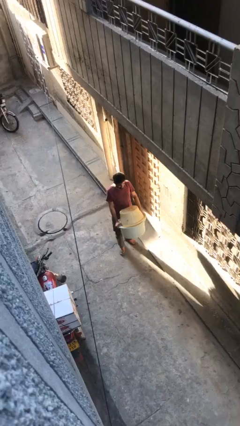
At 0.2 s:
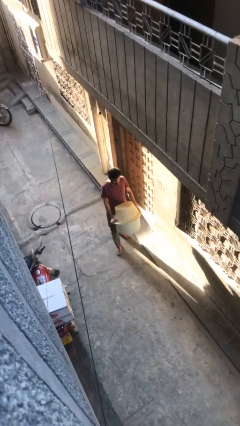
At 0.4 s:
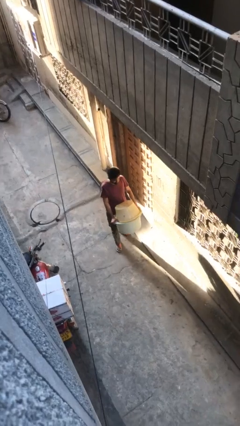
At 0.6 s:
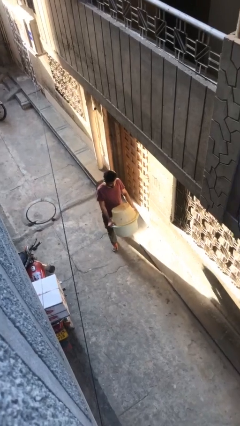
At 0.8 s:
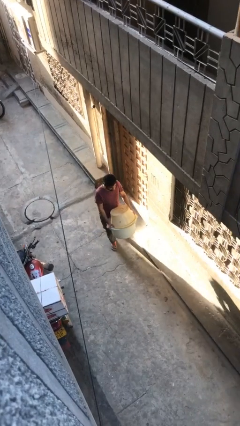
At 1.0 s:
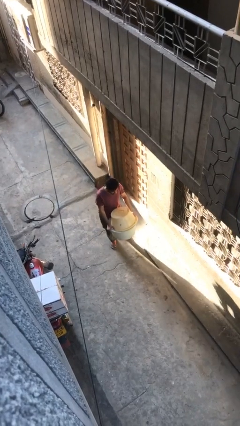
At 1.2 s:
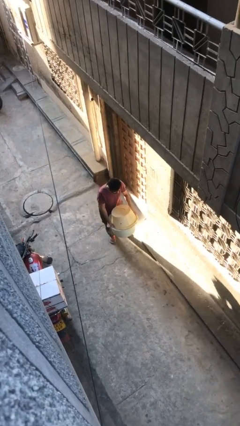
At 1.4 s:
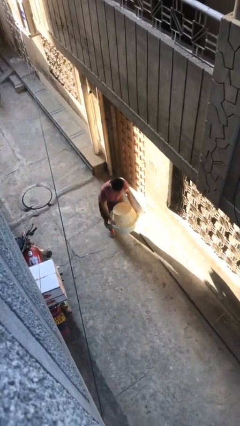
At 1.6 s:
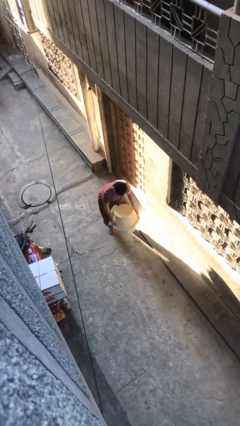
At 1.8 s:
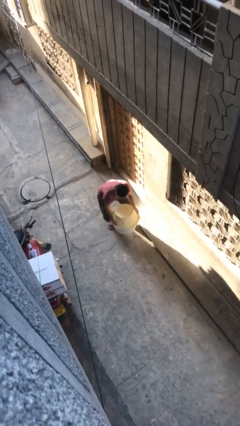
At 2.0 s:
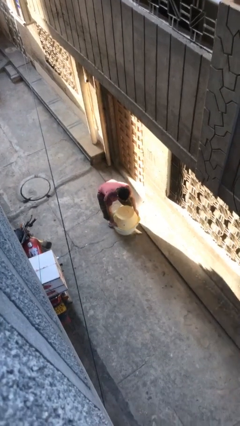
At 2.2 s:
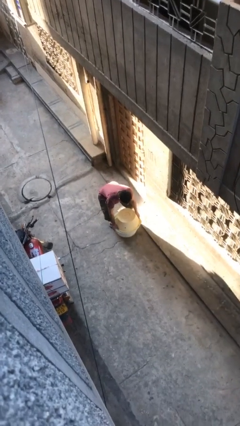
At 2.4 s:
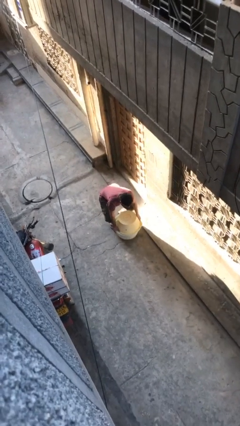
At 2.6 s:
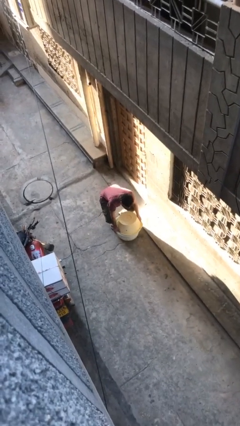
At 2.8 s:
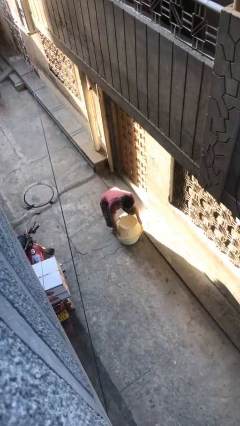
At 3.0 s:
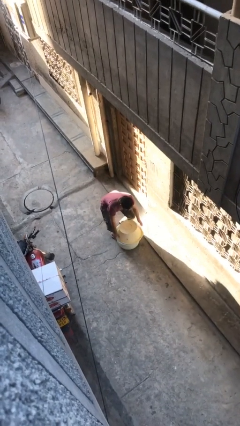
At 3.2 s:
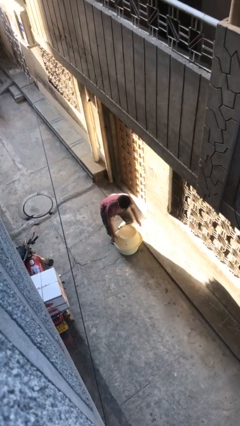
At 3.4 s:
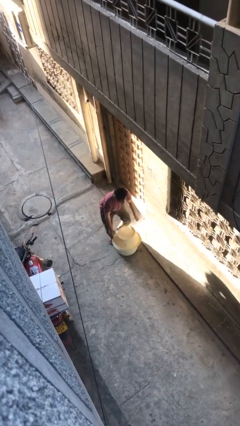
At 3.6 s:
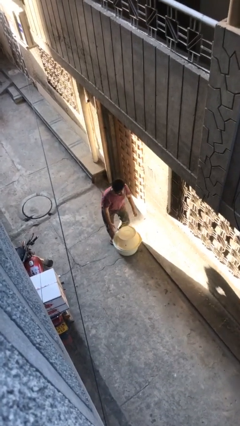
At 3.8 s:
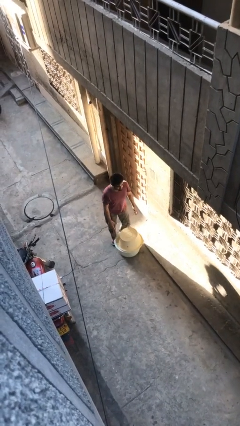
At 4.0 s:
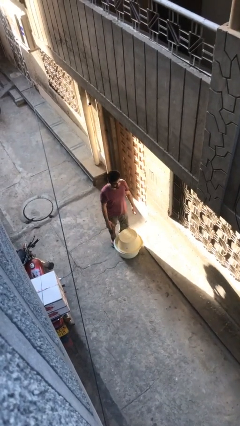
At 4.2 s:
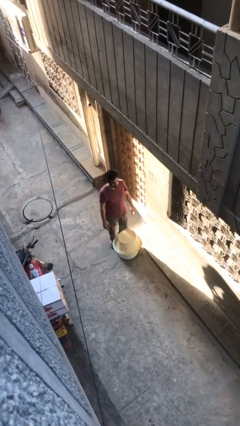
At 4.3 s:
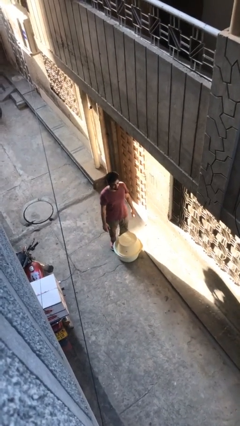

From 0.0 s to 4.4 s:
person puts down object on floor

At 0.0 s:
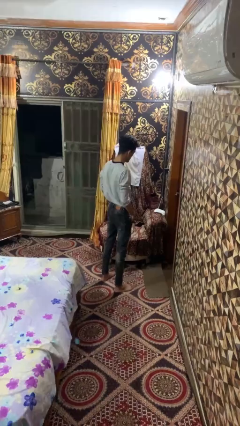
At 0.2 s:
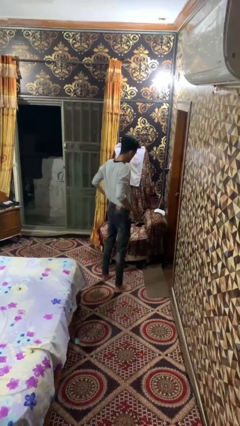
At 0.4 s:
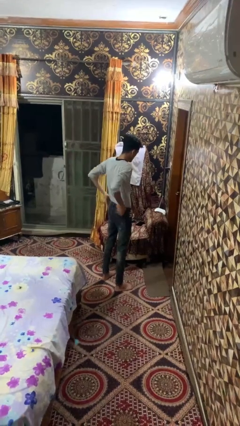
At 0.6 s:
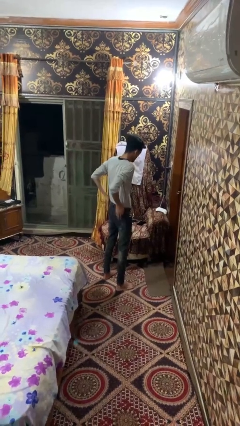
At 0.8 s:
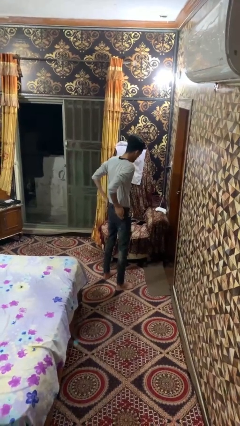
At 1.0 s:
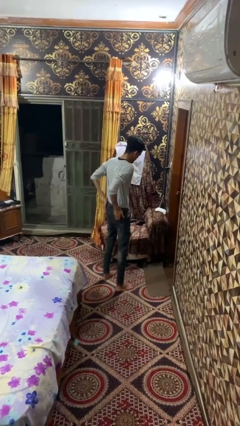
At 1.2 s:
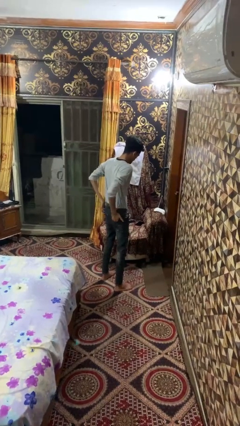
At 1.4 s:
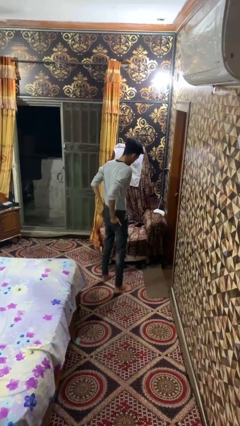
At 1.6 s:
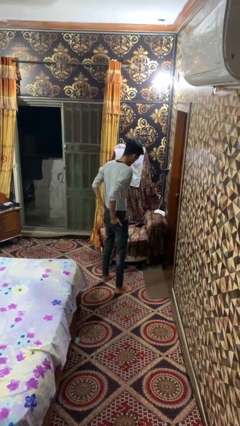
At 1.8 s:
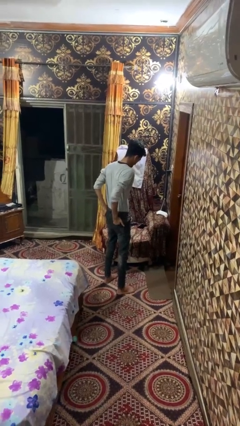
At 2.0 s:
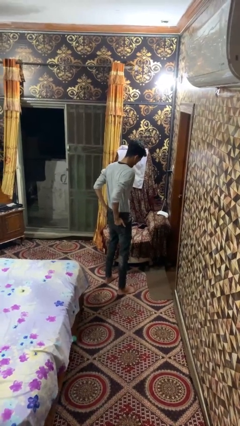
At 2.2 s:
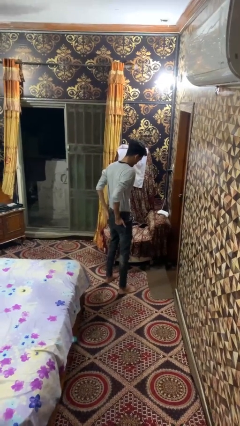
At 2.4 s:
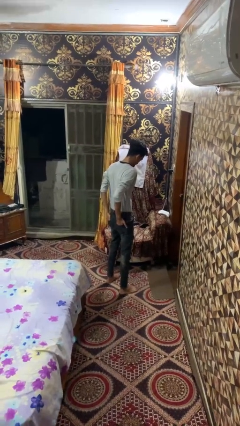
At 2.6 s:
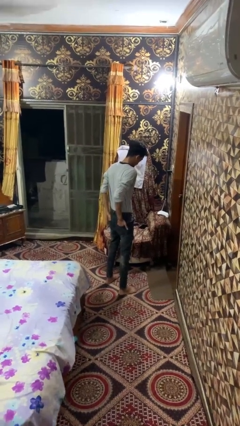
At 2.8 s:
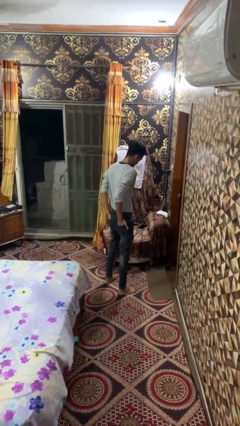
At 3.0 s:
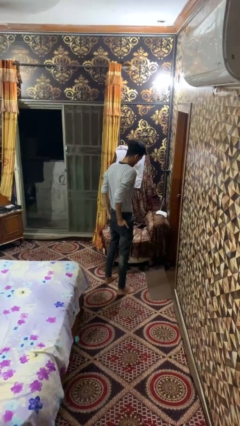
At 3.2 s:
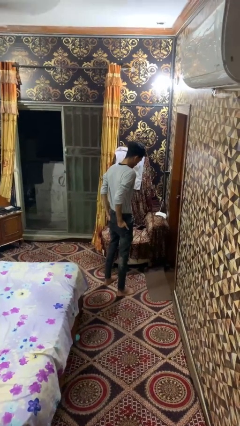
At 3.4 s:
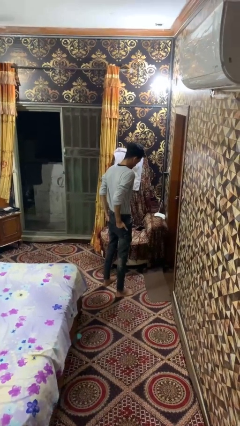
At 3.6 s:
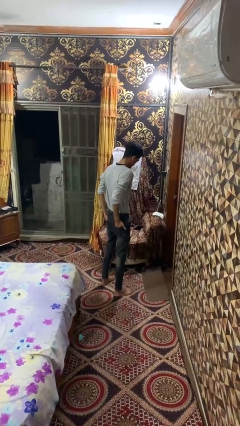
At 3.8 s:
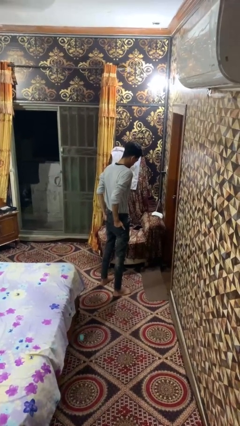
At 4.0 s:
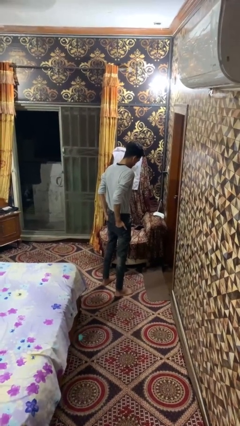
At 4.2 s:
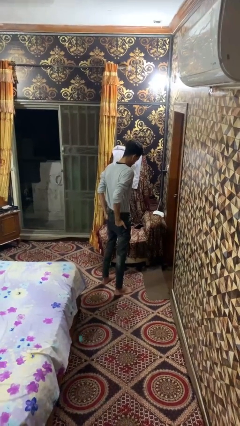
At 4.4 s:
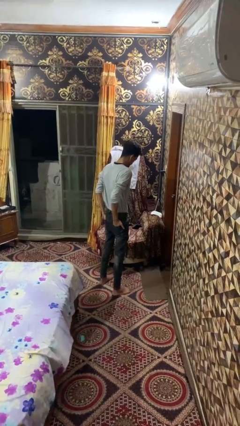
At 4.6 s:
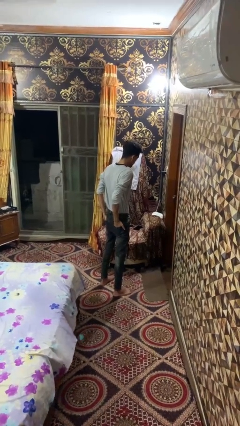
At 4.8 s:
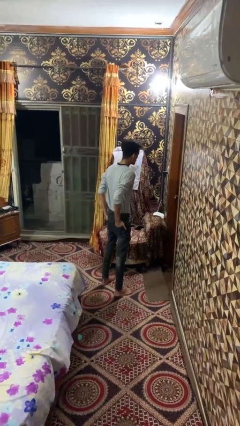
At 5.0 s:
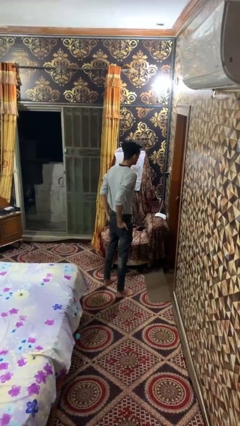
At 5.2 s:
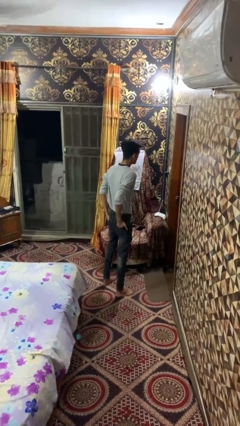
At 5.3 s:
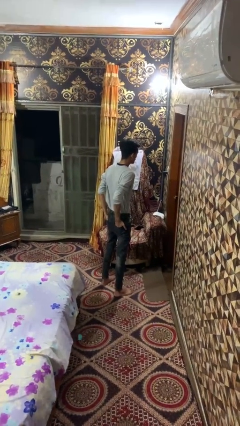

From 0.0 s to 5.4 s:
person puts hands in back pockets

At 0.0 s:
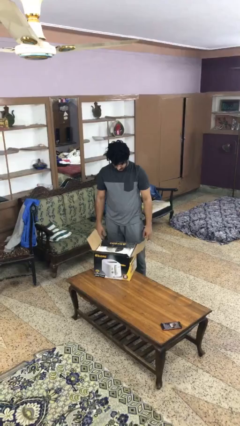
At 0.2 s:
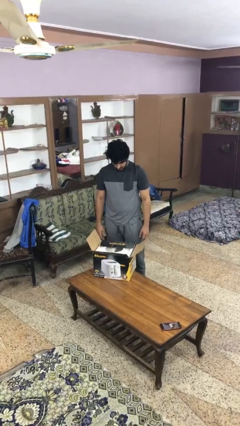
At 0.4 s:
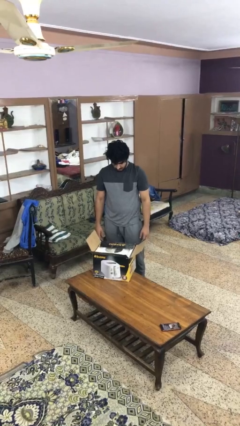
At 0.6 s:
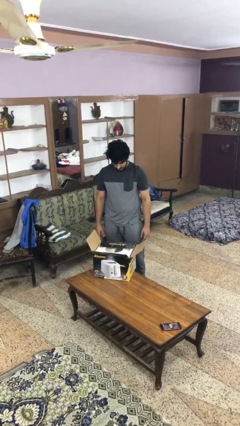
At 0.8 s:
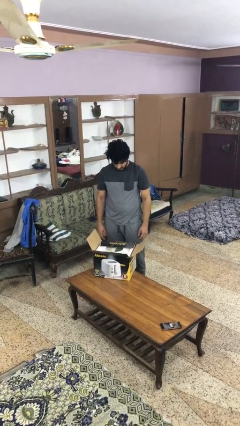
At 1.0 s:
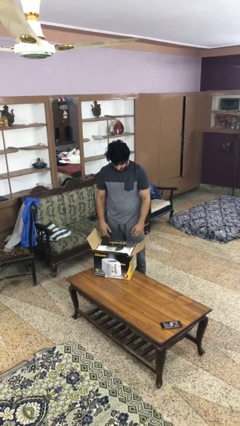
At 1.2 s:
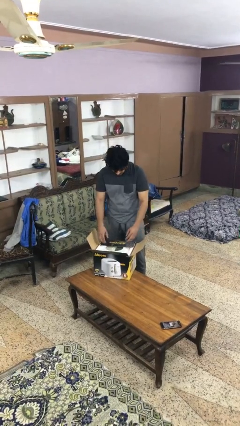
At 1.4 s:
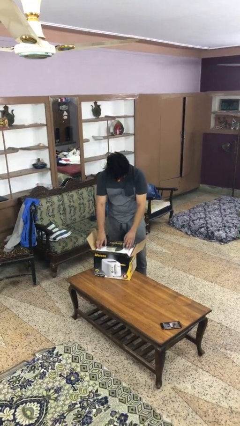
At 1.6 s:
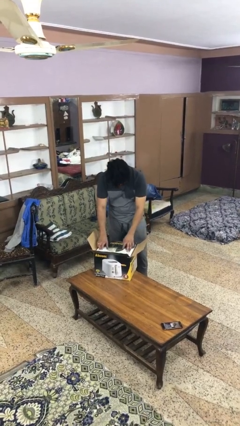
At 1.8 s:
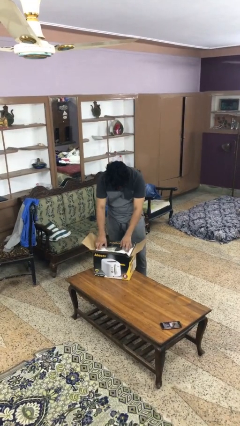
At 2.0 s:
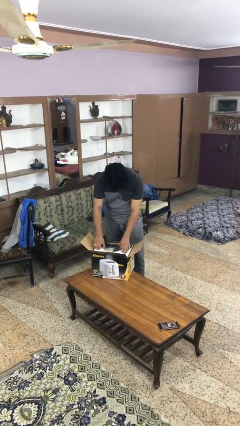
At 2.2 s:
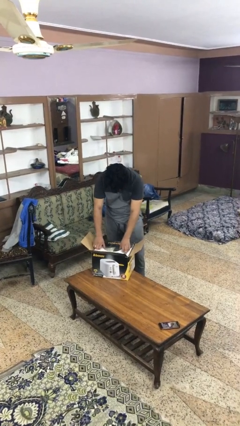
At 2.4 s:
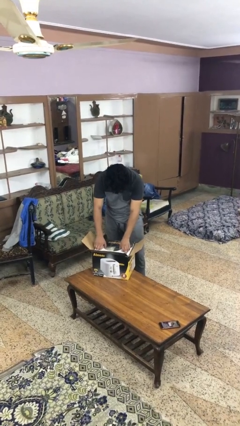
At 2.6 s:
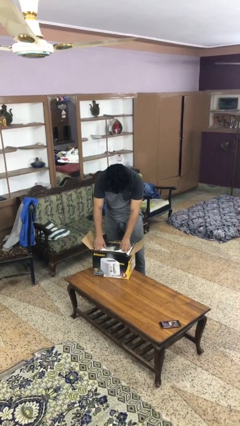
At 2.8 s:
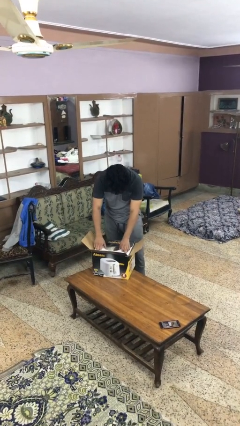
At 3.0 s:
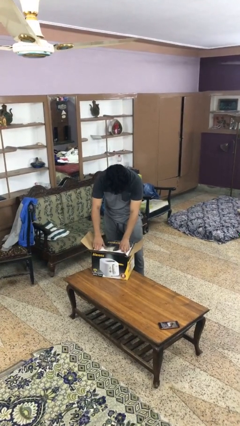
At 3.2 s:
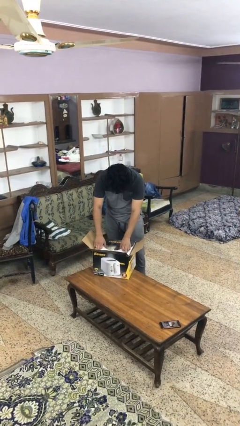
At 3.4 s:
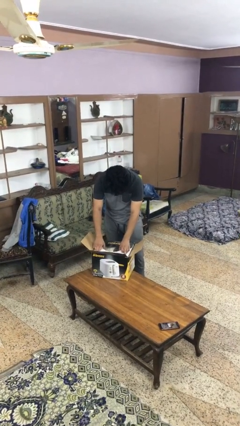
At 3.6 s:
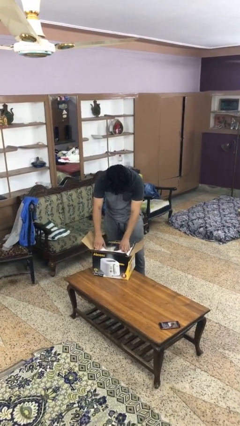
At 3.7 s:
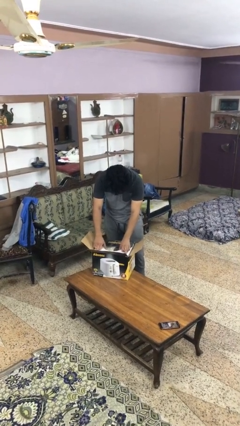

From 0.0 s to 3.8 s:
person searches in box

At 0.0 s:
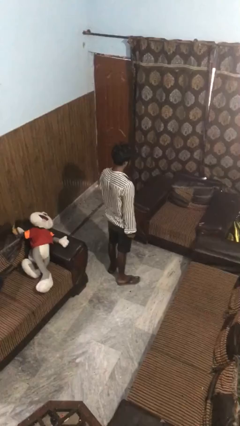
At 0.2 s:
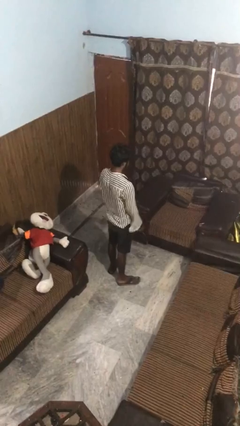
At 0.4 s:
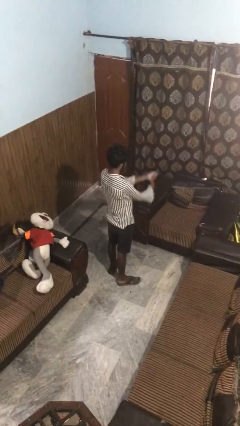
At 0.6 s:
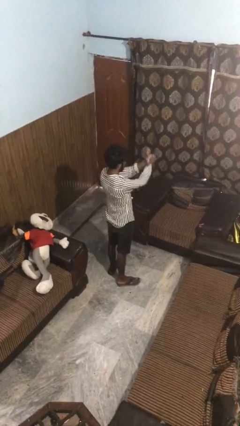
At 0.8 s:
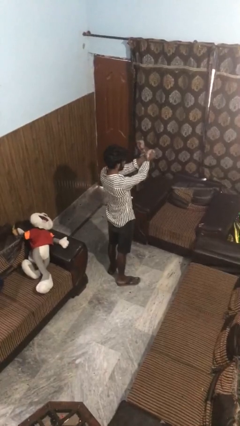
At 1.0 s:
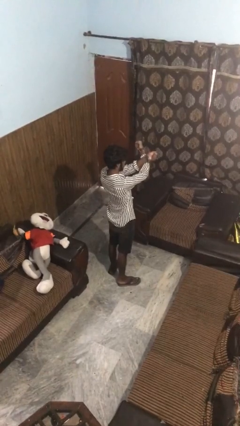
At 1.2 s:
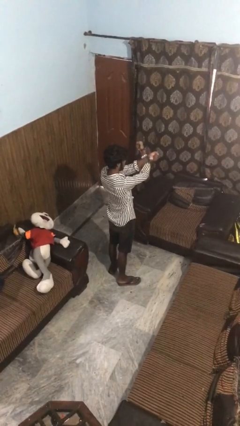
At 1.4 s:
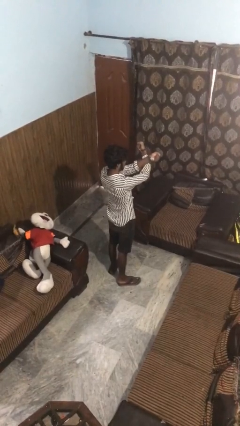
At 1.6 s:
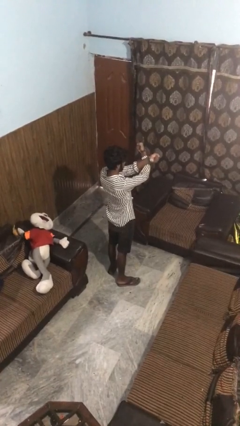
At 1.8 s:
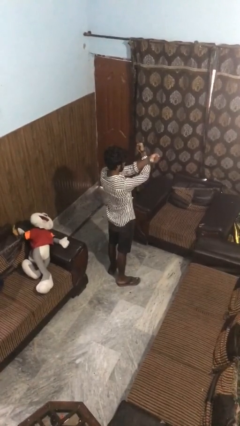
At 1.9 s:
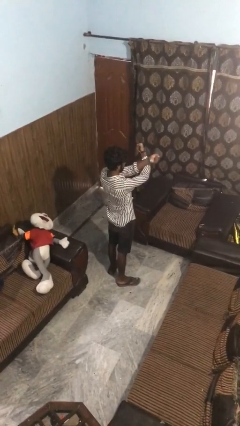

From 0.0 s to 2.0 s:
person gestures arms x

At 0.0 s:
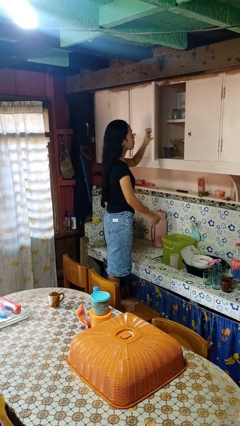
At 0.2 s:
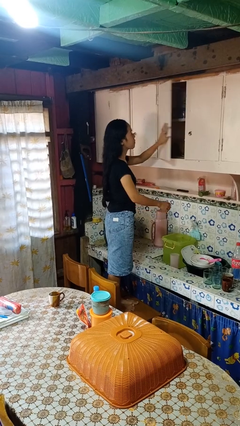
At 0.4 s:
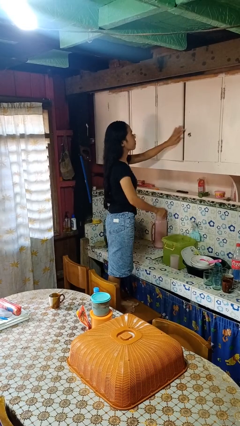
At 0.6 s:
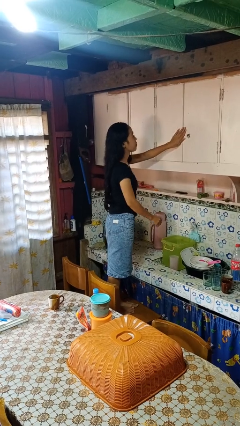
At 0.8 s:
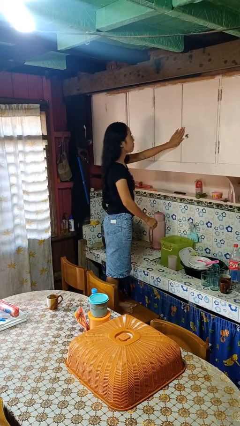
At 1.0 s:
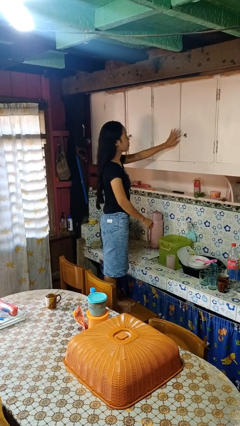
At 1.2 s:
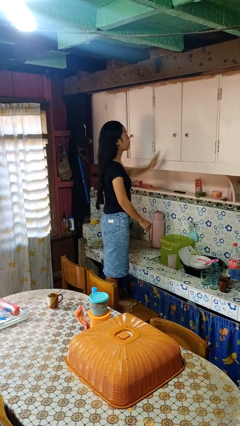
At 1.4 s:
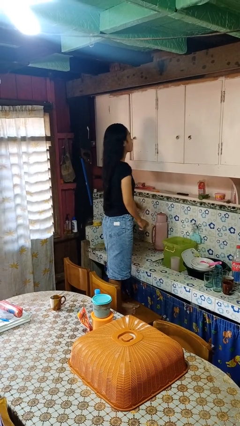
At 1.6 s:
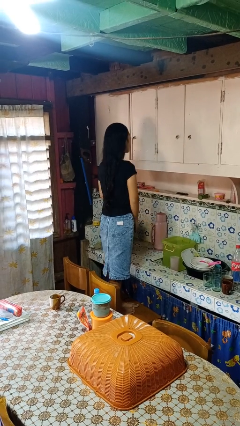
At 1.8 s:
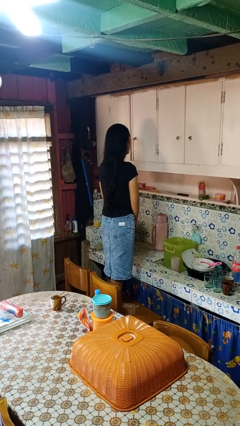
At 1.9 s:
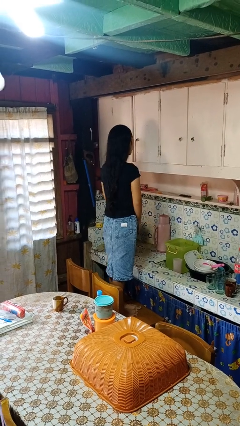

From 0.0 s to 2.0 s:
person closes cabinet
